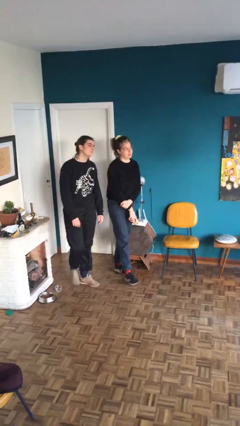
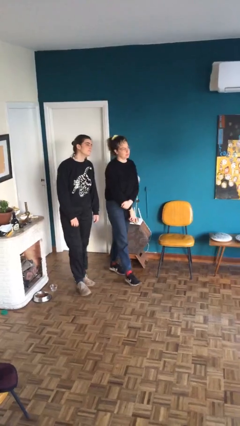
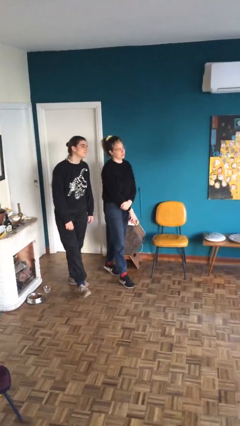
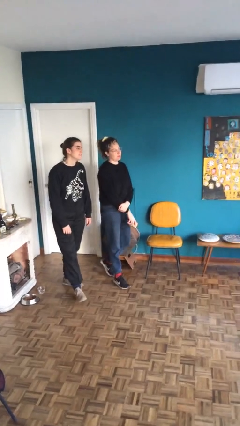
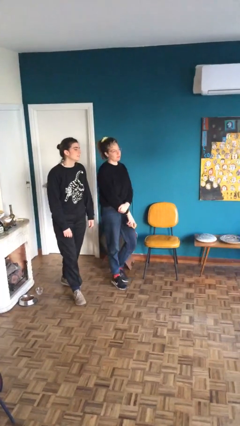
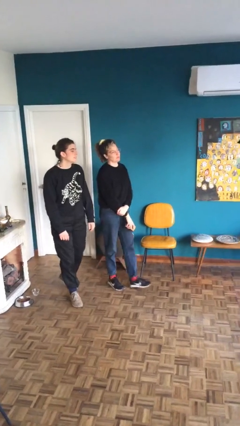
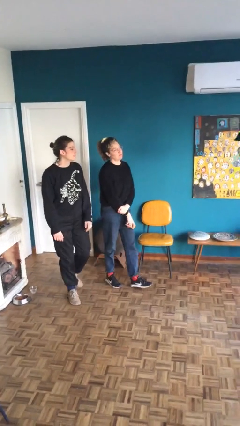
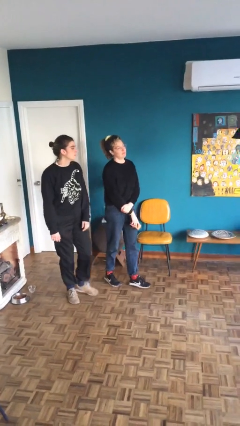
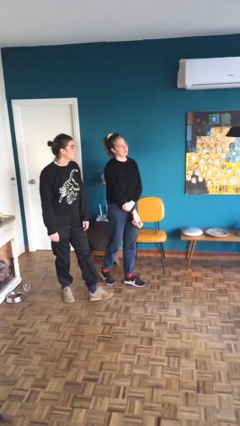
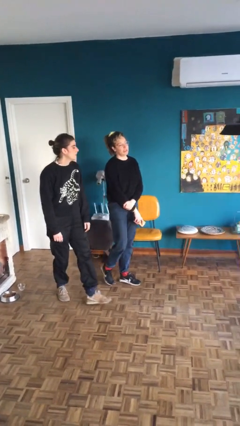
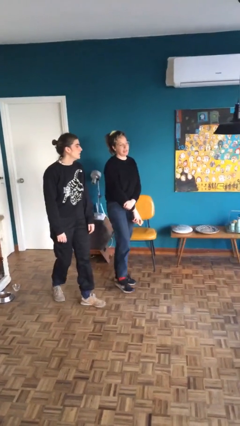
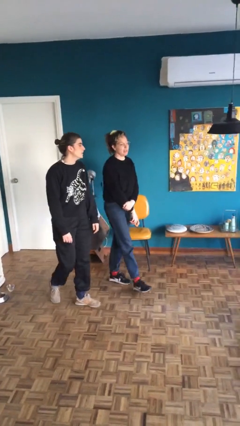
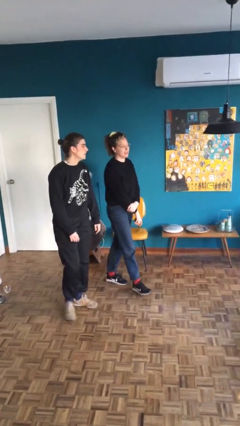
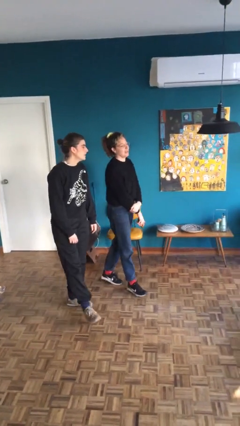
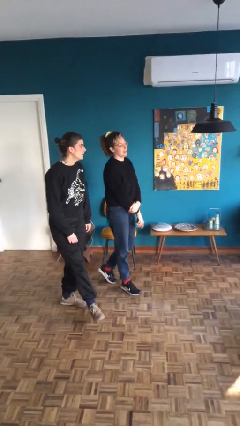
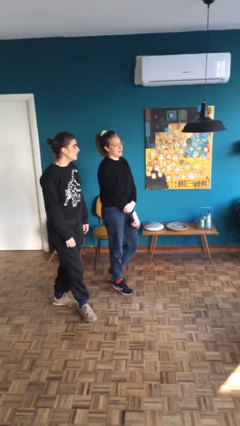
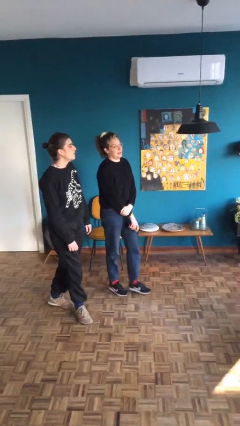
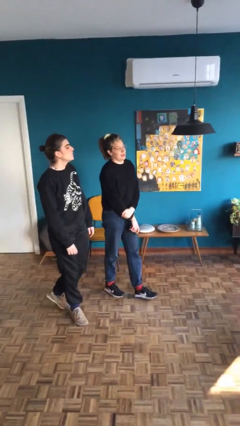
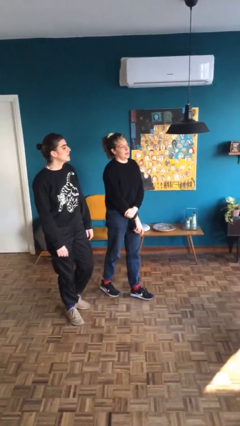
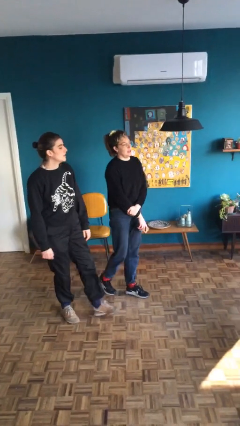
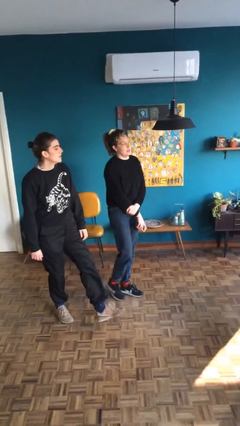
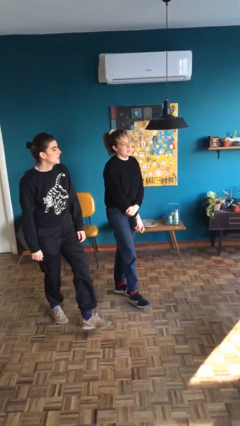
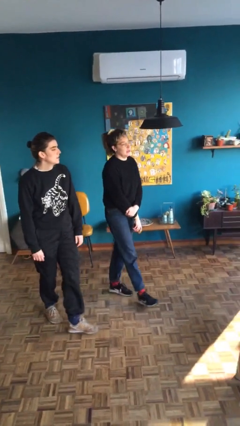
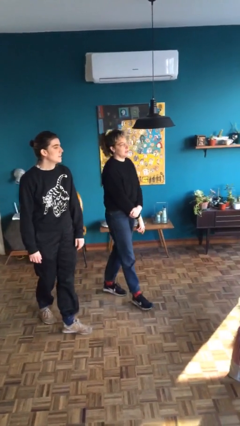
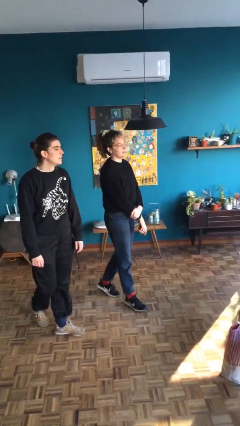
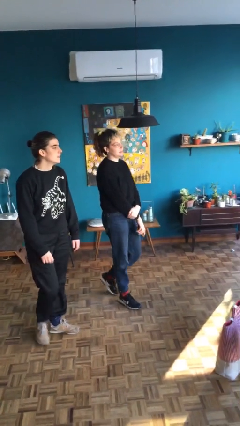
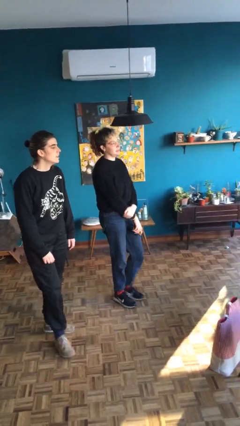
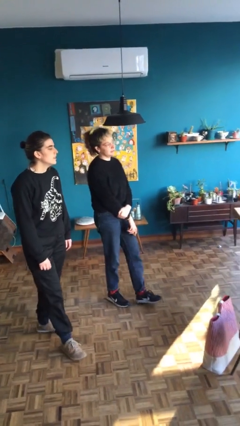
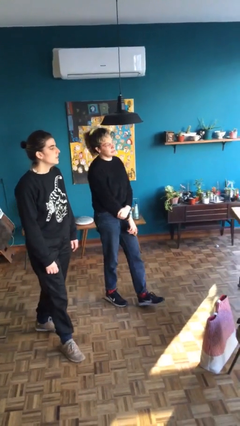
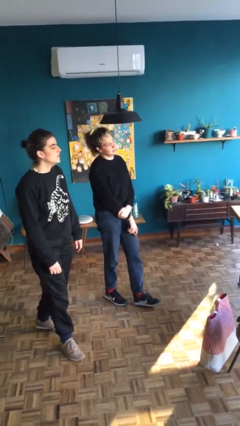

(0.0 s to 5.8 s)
person talks to person

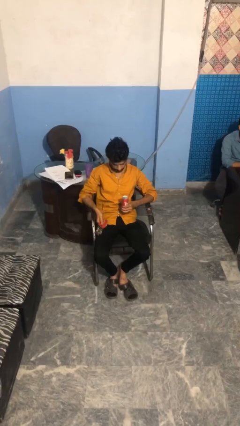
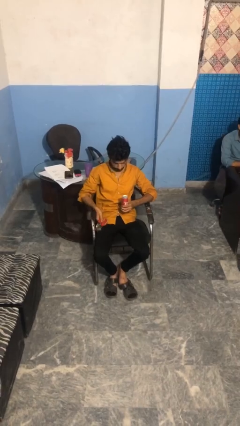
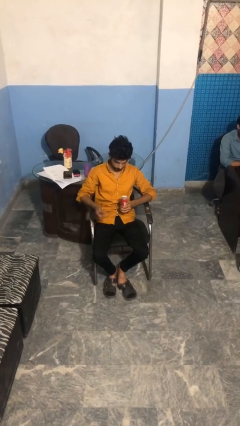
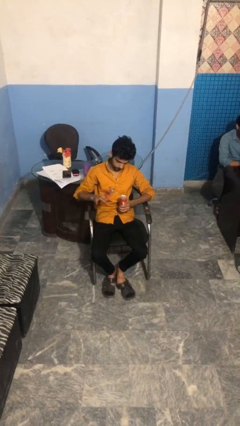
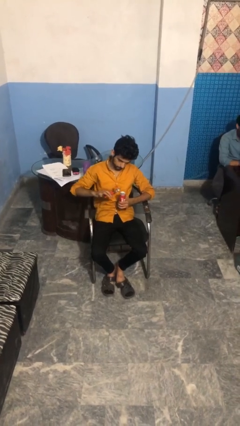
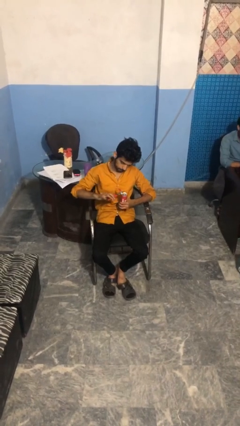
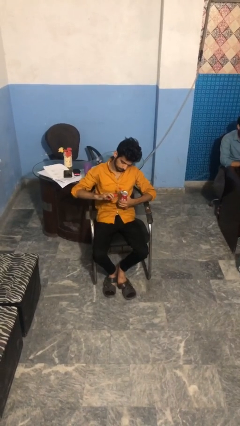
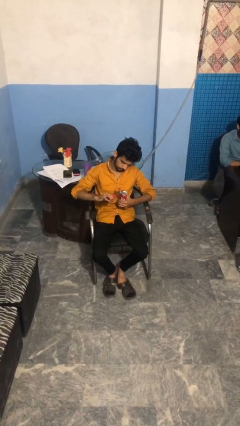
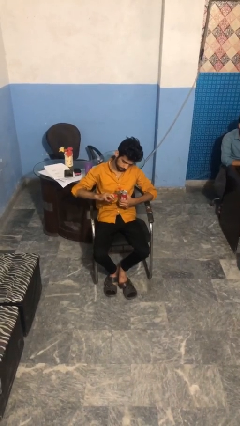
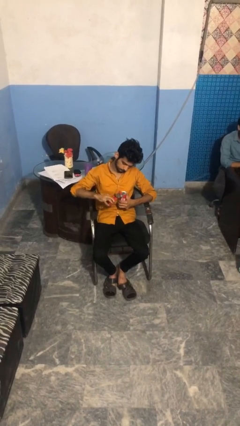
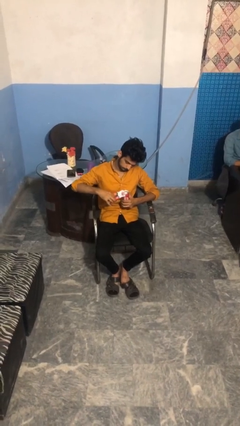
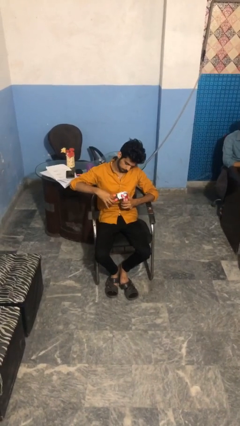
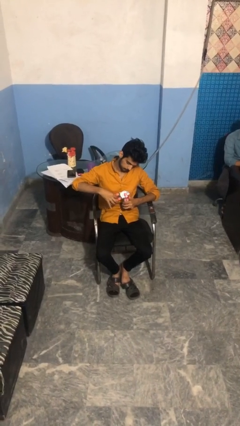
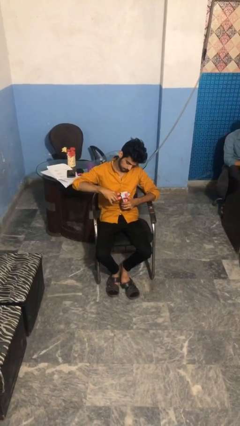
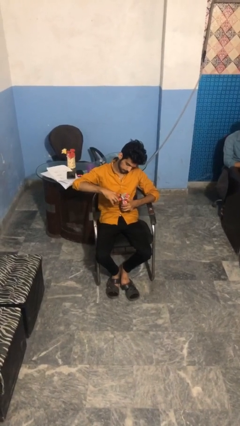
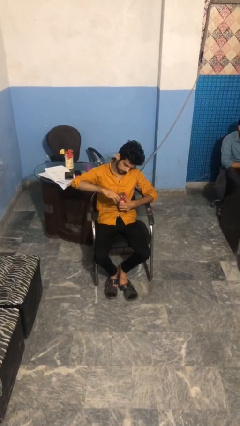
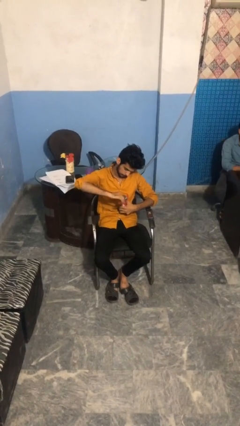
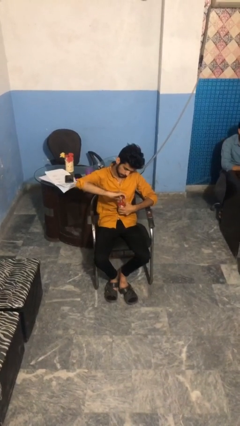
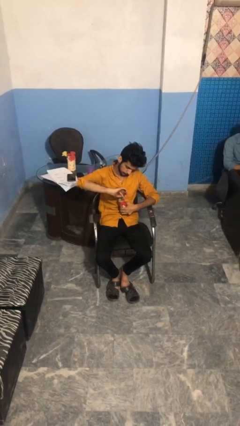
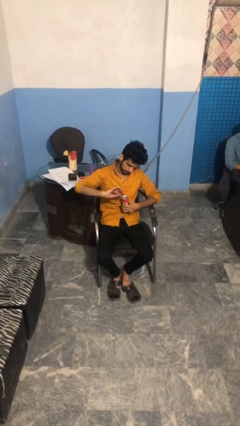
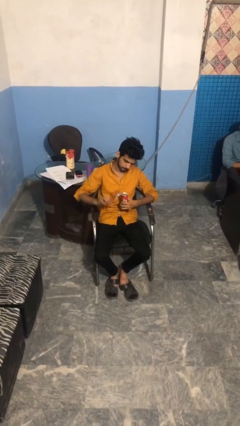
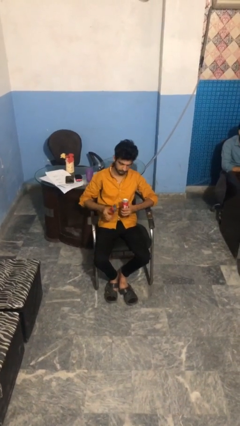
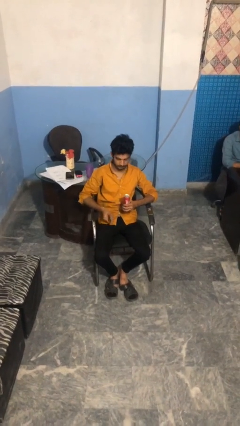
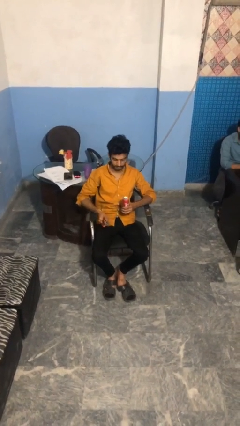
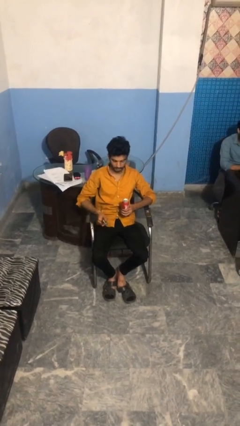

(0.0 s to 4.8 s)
person opens can with can opener

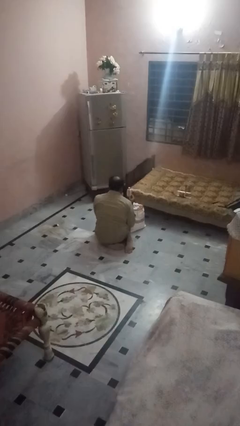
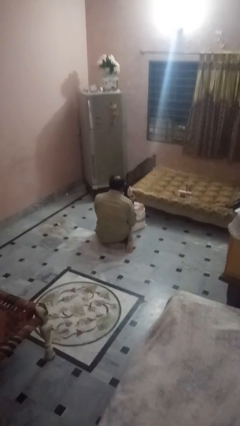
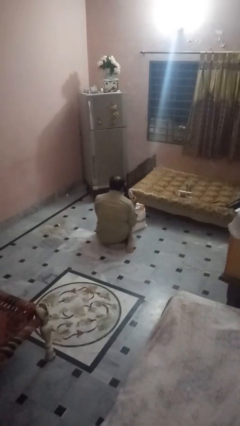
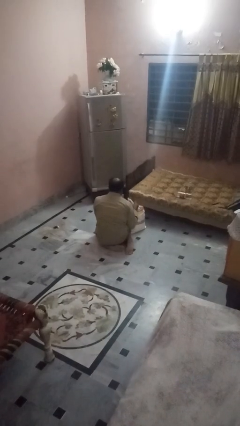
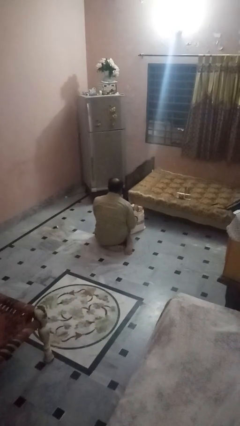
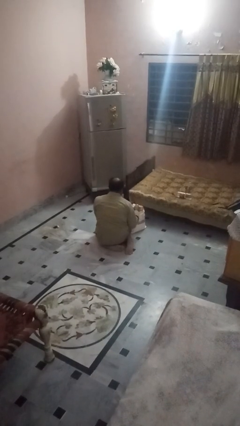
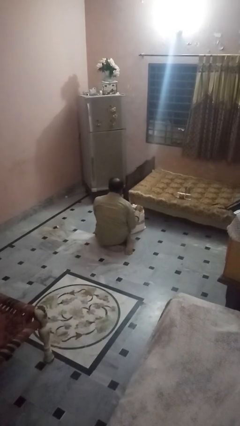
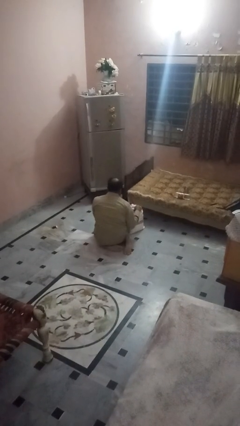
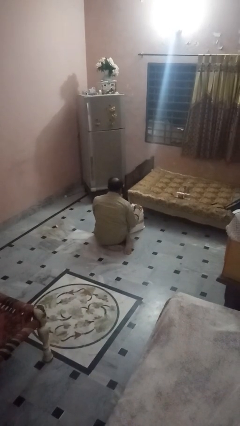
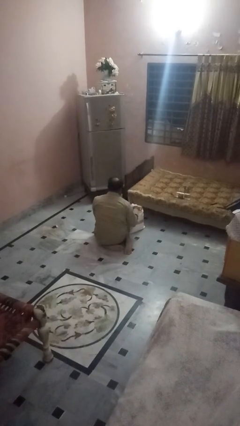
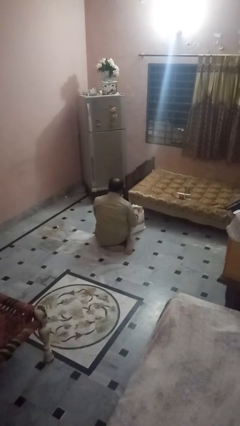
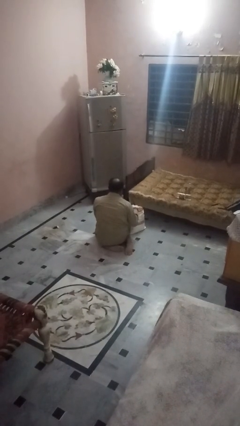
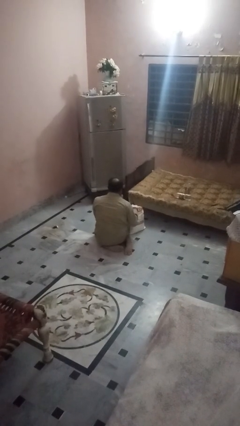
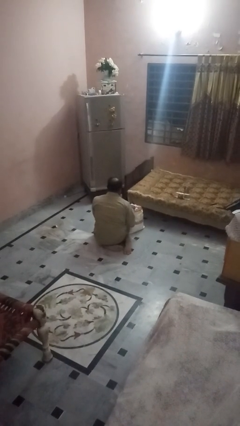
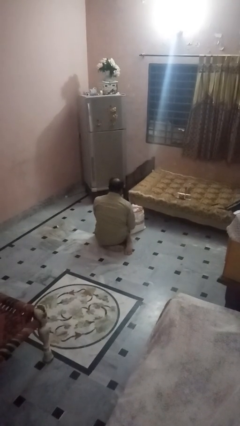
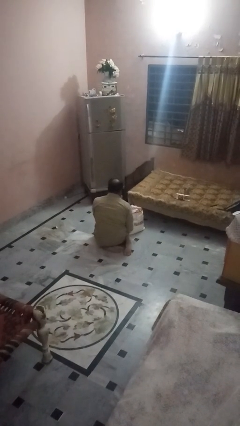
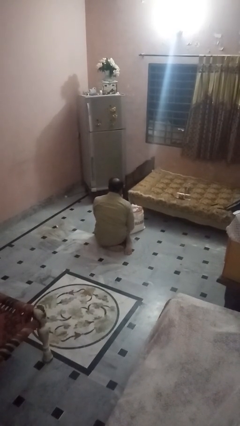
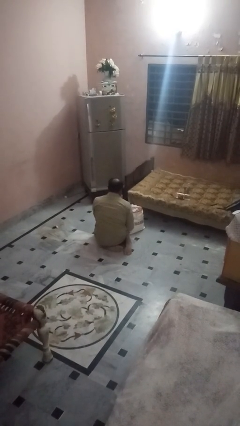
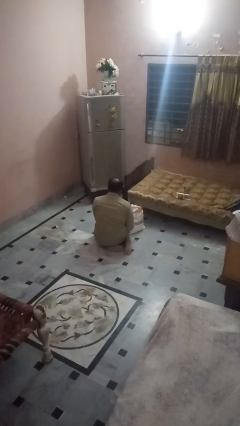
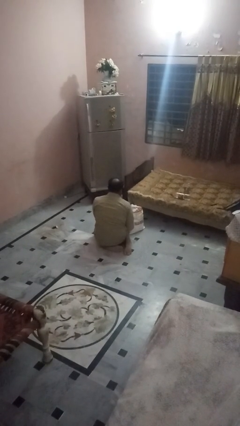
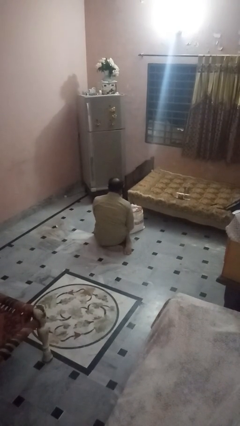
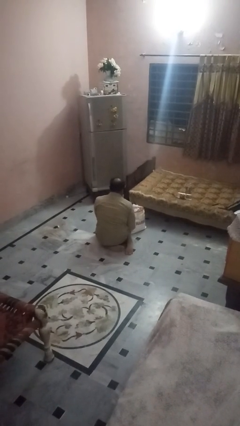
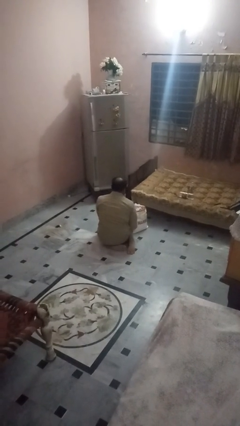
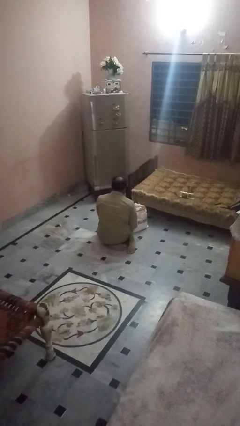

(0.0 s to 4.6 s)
person puts object into bag

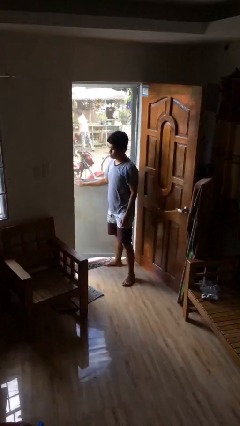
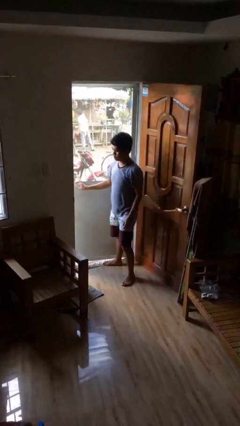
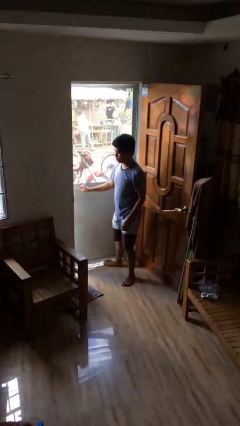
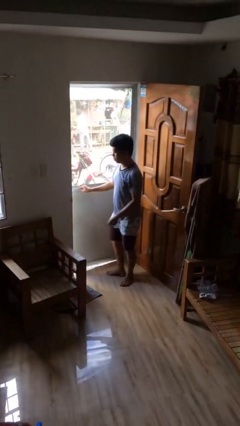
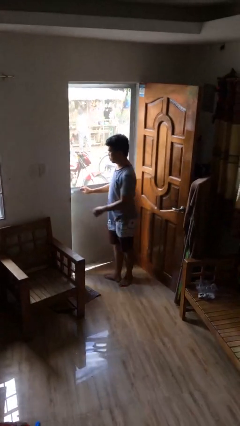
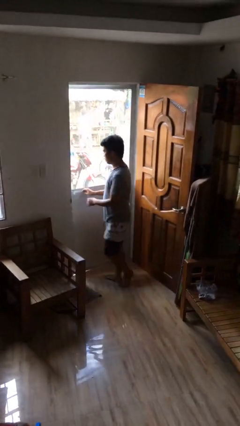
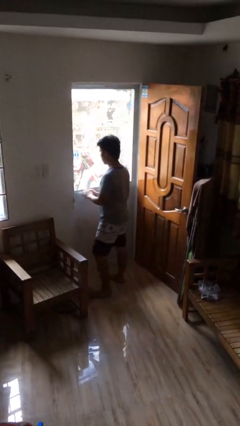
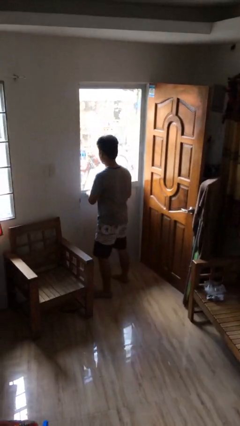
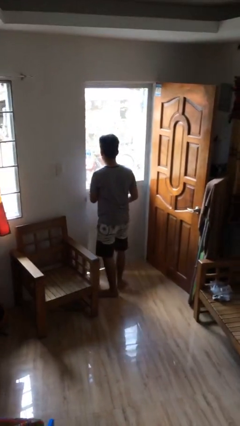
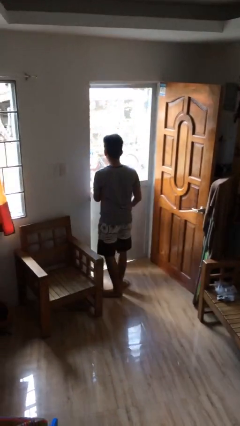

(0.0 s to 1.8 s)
person closes facility door

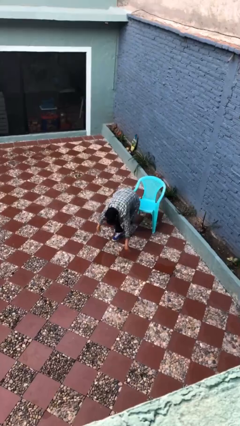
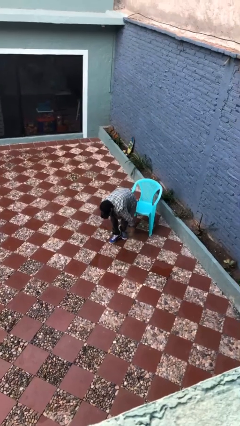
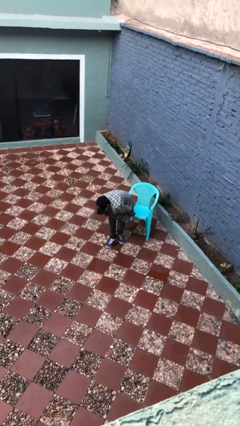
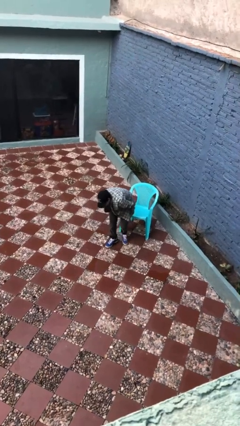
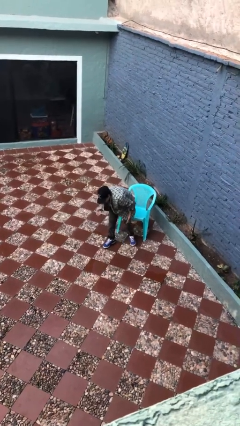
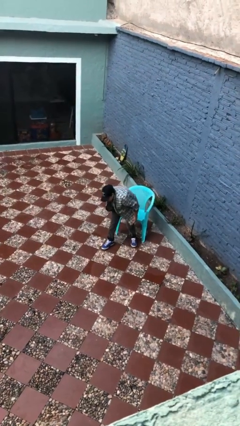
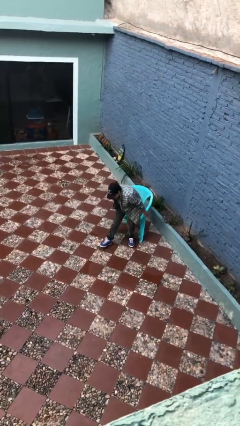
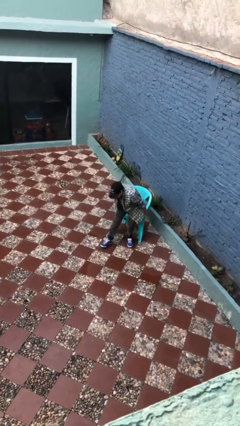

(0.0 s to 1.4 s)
person stands up from floor
